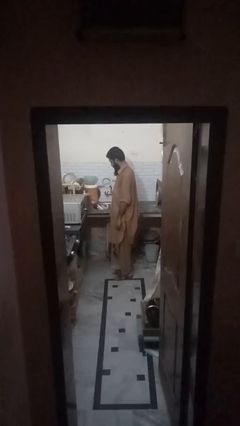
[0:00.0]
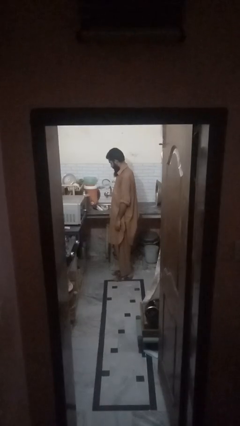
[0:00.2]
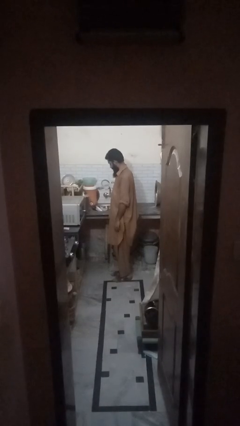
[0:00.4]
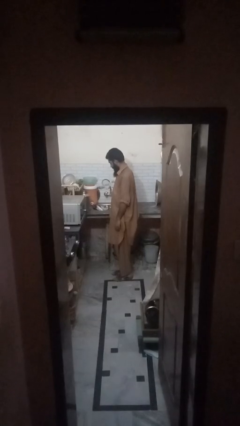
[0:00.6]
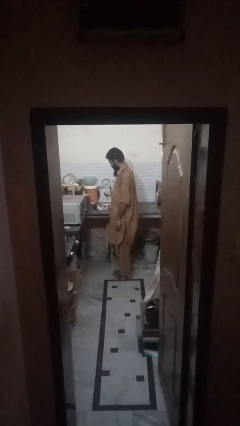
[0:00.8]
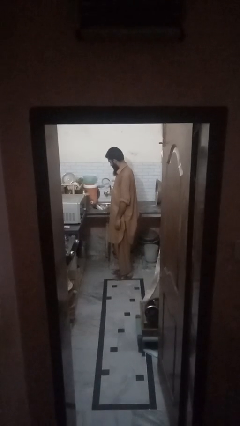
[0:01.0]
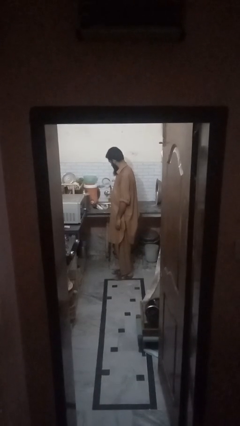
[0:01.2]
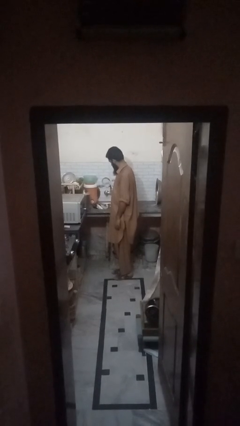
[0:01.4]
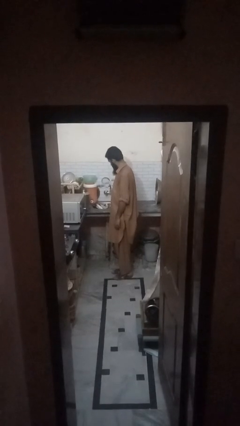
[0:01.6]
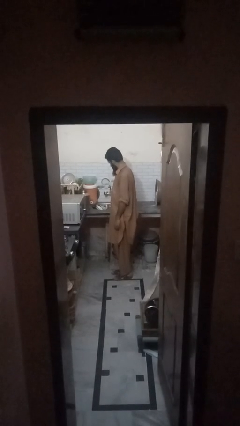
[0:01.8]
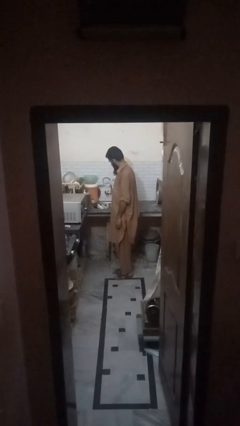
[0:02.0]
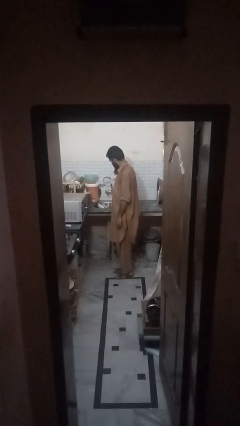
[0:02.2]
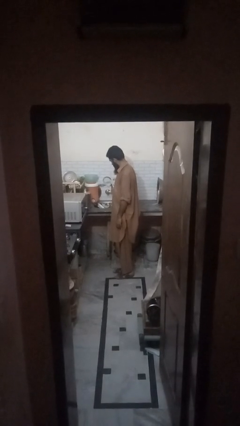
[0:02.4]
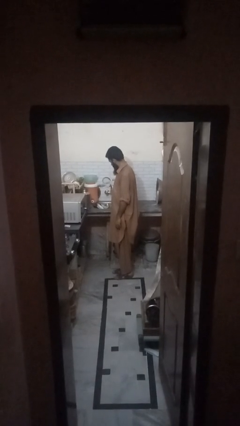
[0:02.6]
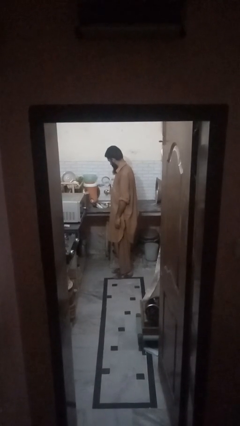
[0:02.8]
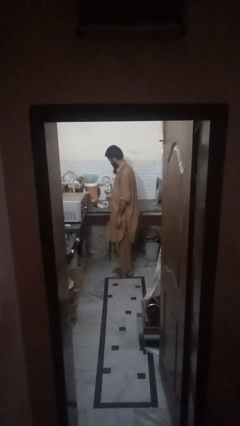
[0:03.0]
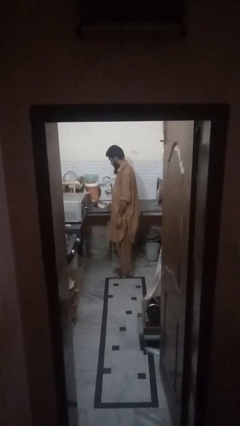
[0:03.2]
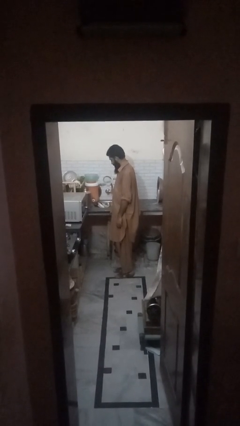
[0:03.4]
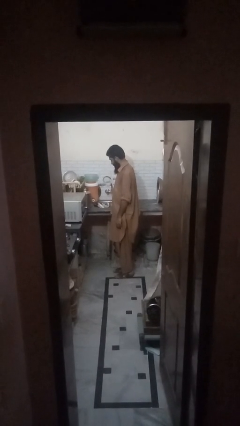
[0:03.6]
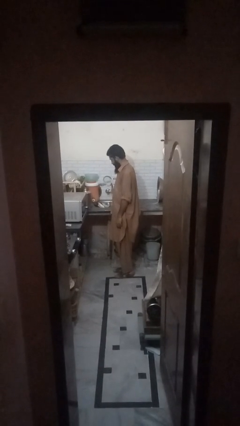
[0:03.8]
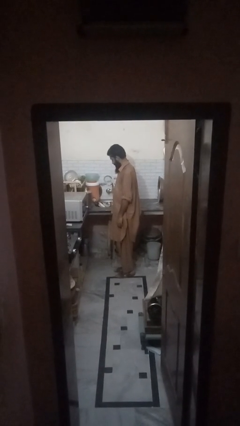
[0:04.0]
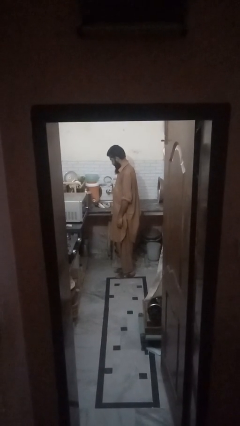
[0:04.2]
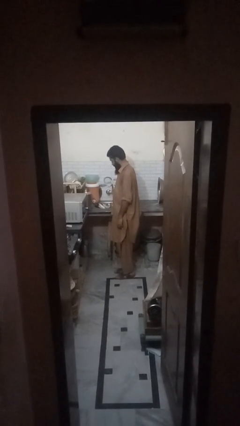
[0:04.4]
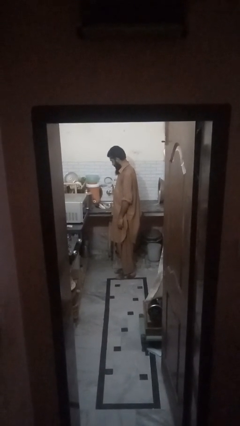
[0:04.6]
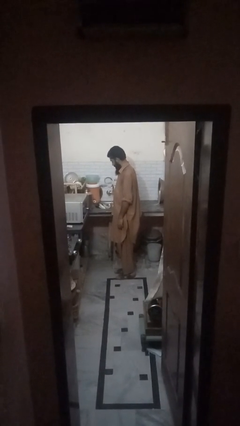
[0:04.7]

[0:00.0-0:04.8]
person opens dishwasher

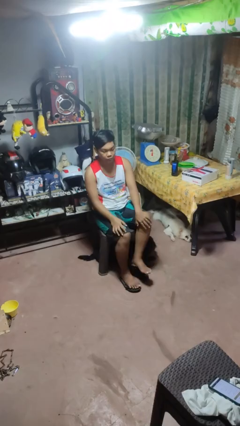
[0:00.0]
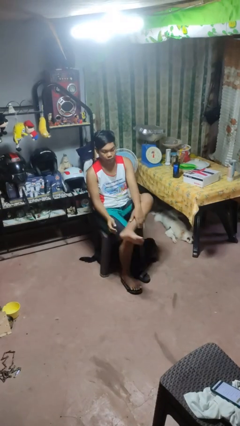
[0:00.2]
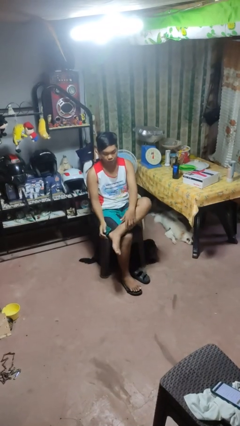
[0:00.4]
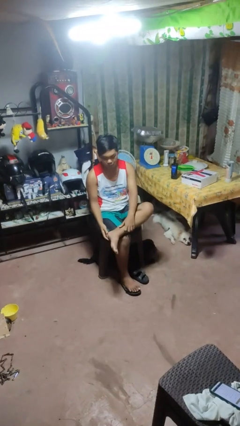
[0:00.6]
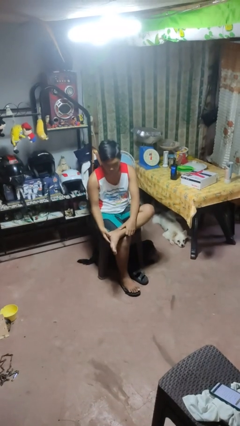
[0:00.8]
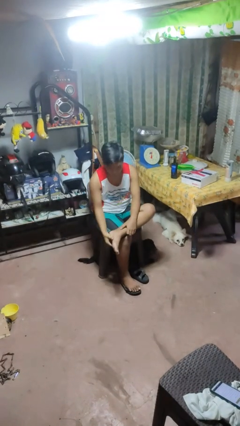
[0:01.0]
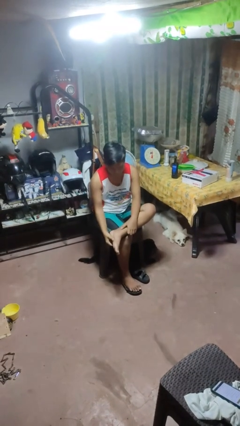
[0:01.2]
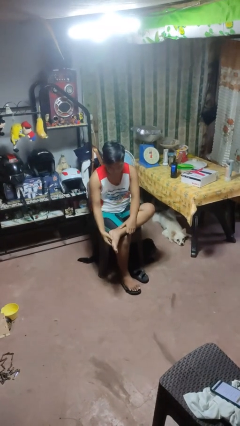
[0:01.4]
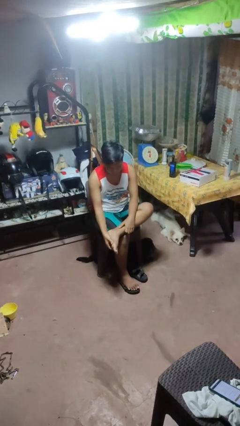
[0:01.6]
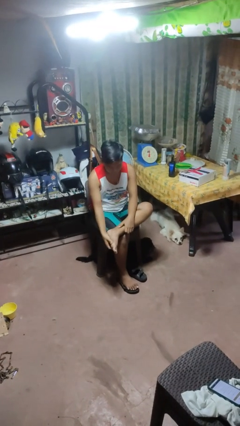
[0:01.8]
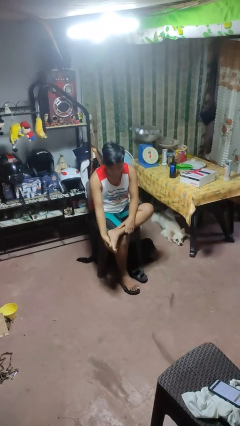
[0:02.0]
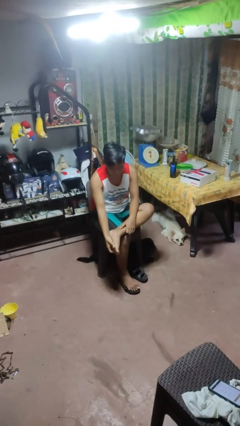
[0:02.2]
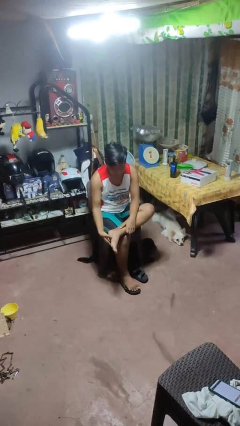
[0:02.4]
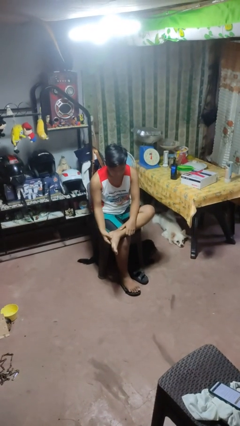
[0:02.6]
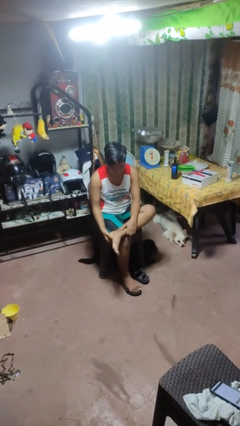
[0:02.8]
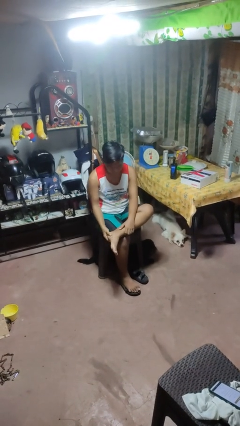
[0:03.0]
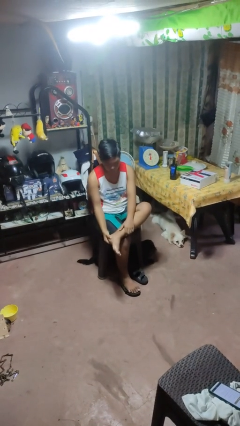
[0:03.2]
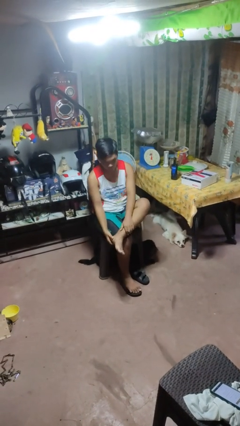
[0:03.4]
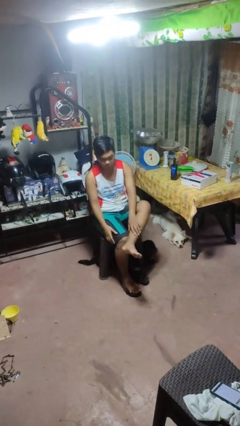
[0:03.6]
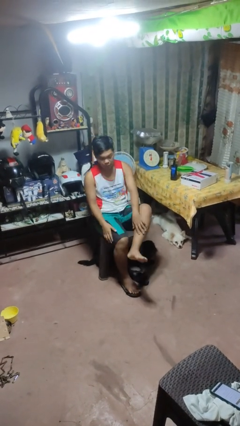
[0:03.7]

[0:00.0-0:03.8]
person rubs foot

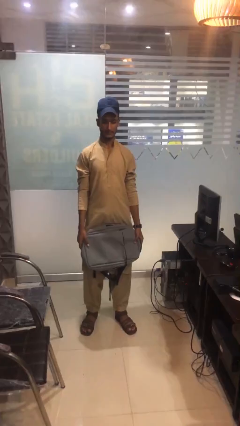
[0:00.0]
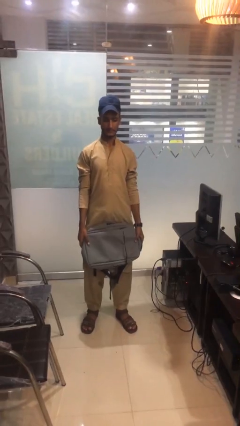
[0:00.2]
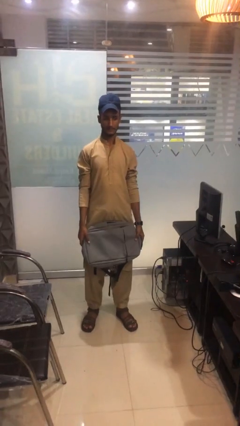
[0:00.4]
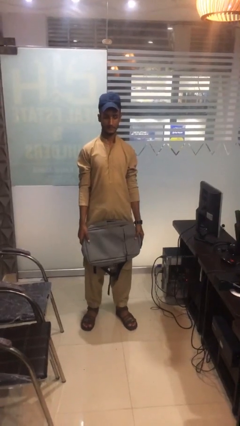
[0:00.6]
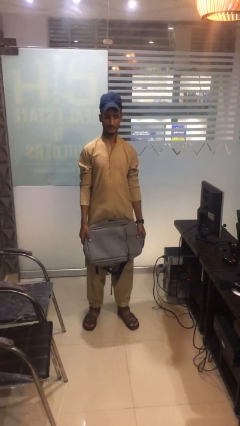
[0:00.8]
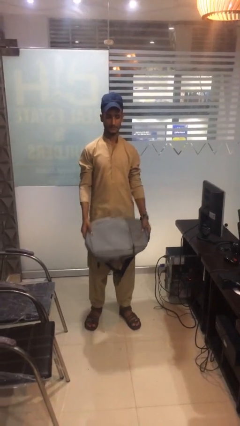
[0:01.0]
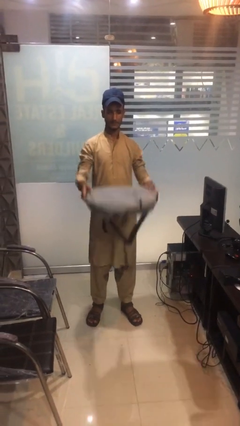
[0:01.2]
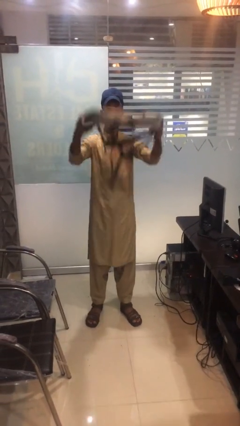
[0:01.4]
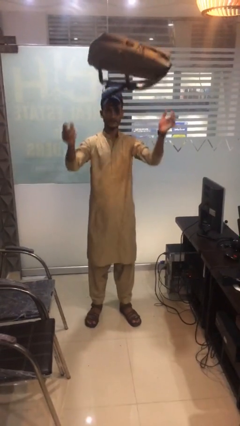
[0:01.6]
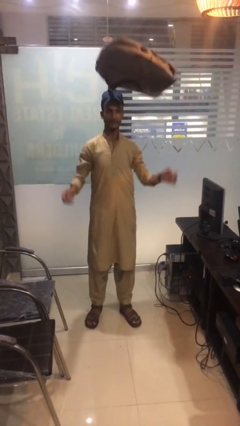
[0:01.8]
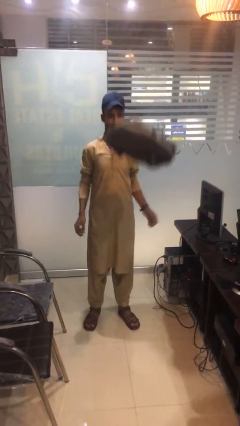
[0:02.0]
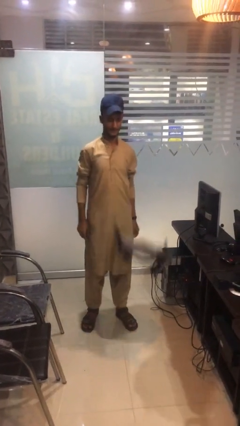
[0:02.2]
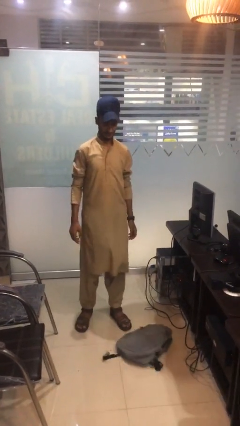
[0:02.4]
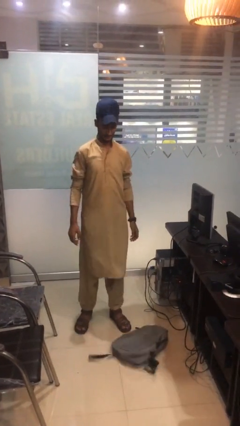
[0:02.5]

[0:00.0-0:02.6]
person throws object into air

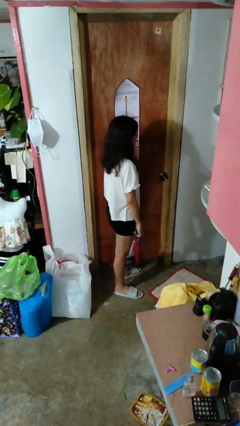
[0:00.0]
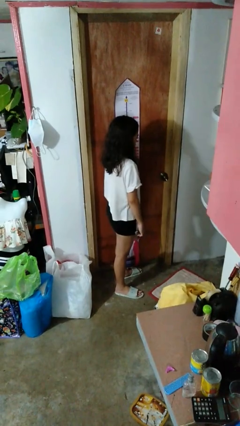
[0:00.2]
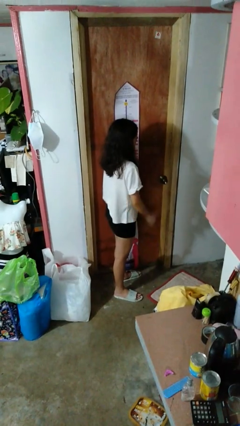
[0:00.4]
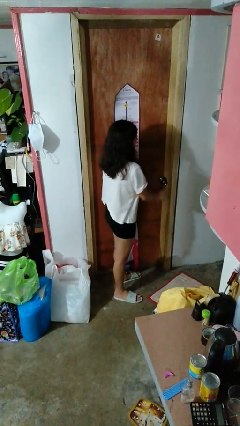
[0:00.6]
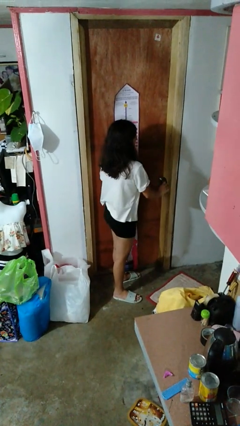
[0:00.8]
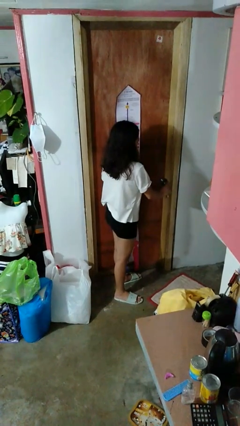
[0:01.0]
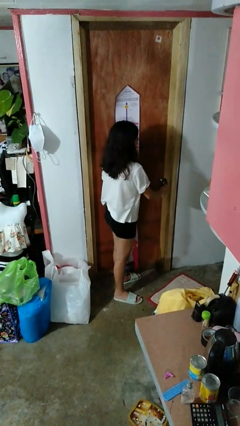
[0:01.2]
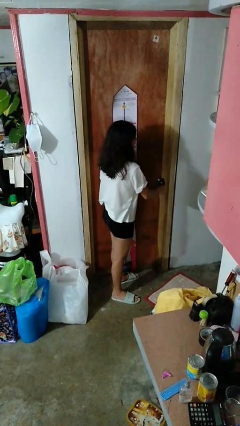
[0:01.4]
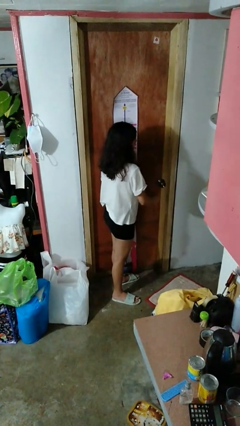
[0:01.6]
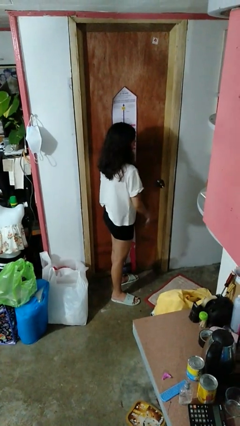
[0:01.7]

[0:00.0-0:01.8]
person locks door with keys

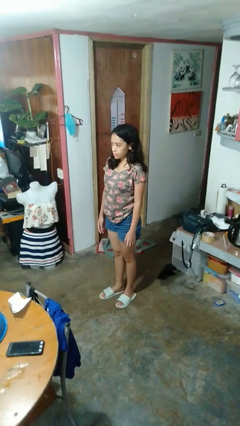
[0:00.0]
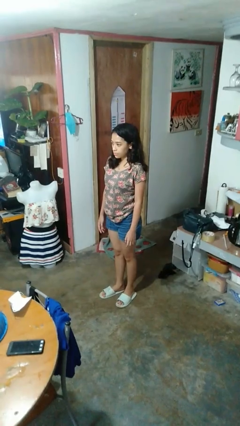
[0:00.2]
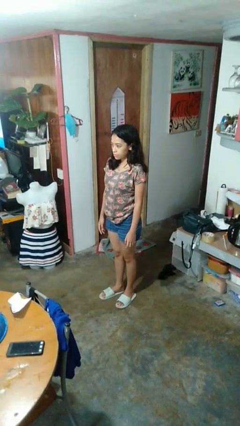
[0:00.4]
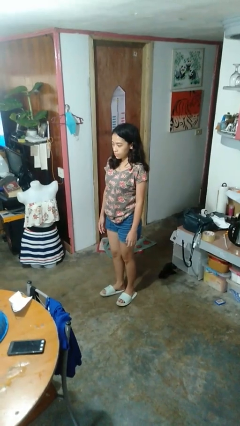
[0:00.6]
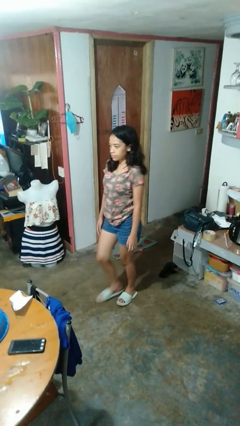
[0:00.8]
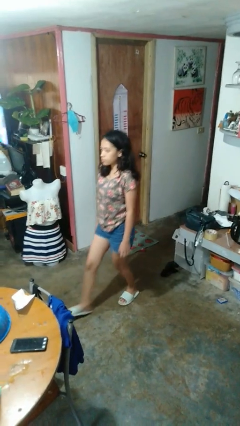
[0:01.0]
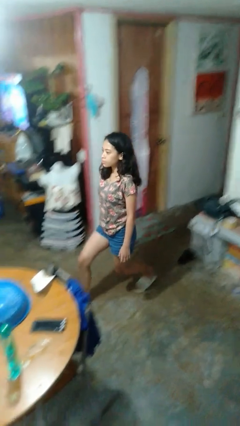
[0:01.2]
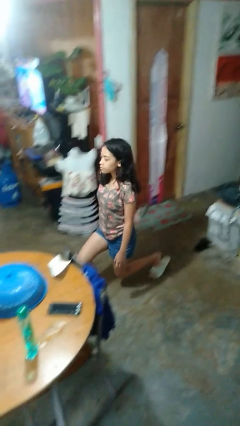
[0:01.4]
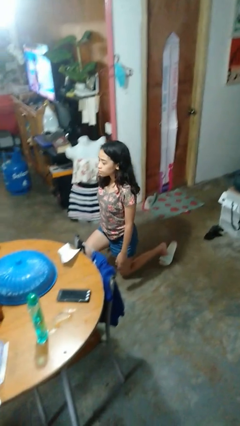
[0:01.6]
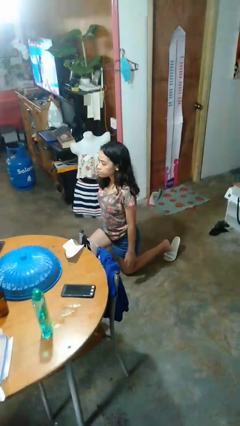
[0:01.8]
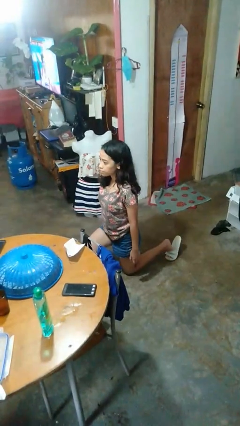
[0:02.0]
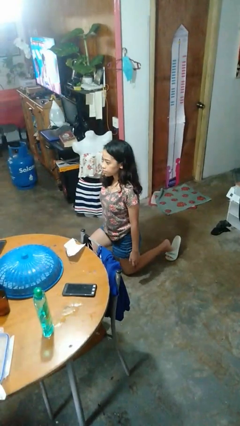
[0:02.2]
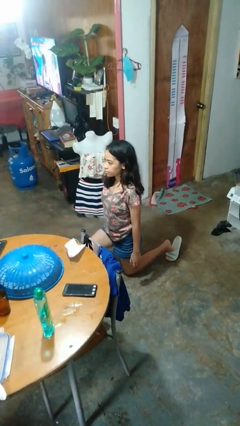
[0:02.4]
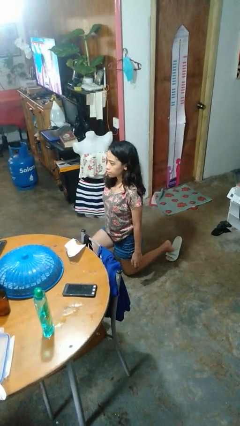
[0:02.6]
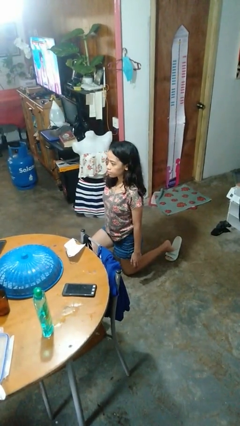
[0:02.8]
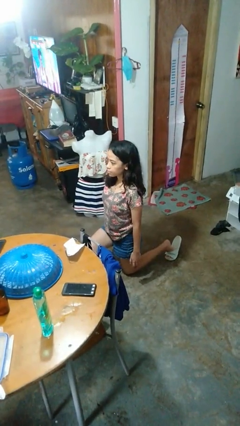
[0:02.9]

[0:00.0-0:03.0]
person kneels

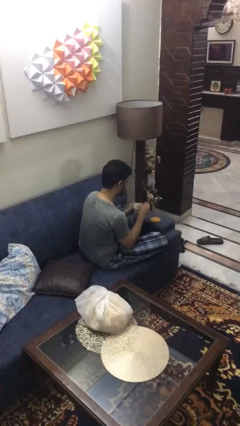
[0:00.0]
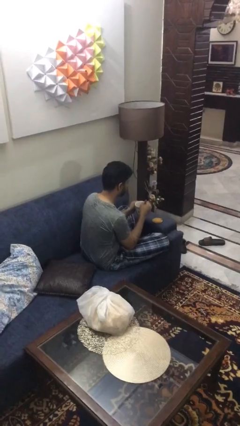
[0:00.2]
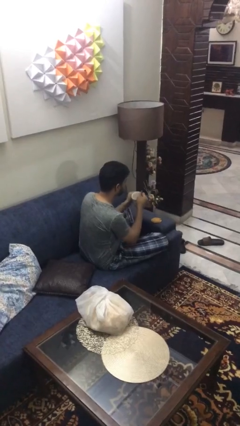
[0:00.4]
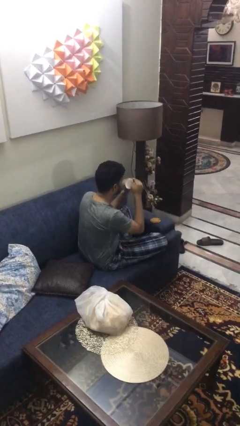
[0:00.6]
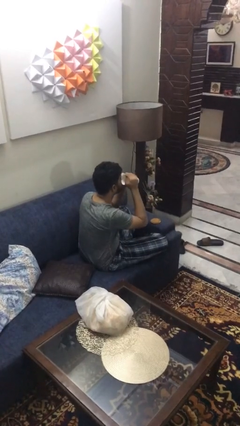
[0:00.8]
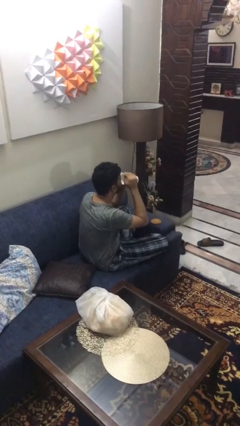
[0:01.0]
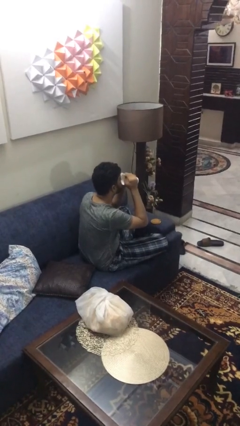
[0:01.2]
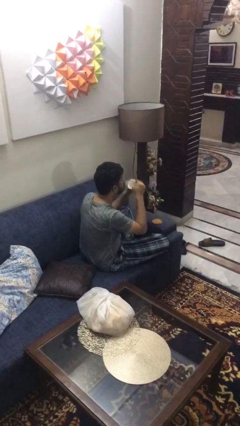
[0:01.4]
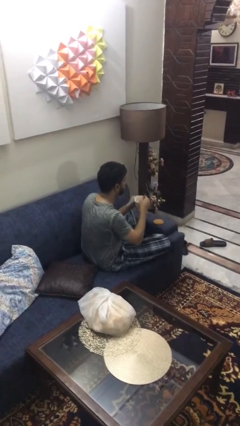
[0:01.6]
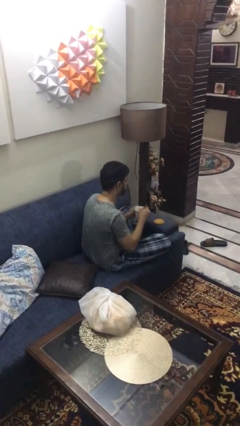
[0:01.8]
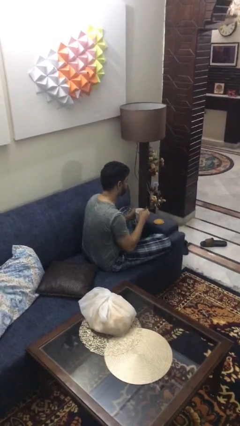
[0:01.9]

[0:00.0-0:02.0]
person drinks from mug
